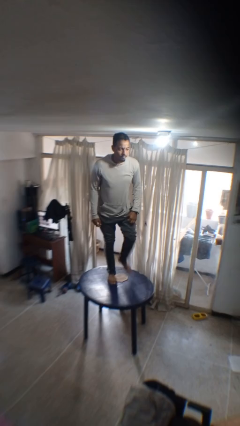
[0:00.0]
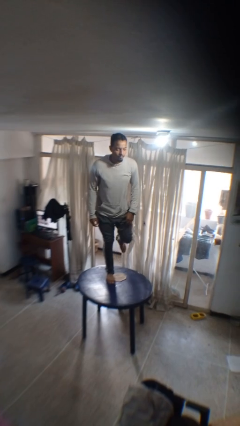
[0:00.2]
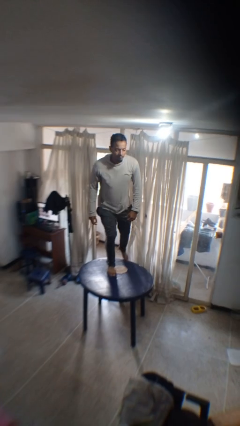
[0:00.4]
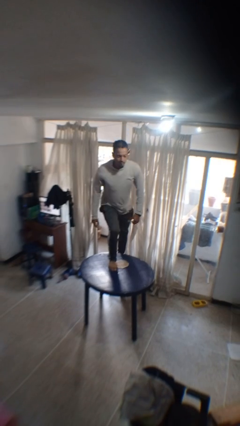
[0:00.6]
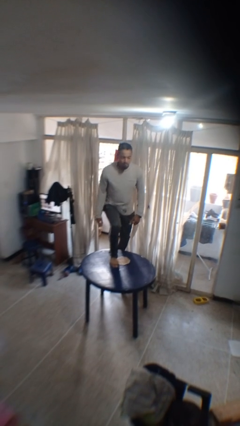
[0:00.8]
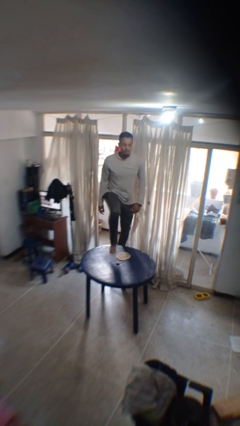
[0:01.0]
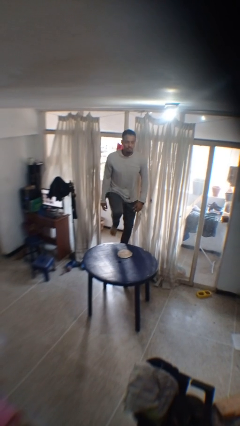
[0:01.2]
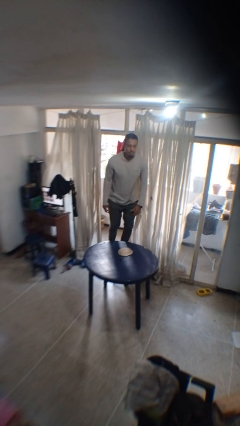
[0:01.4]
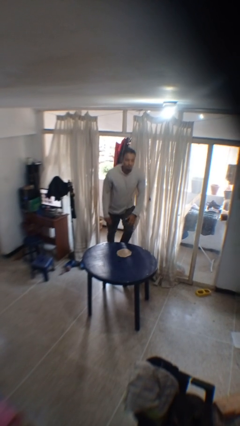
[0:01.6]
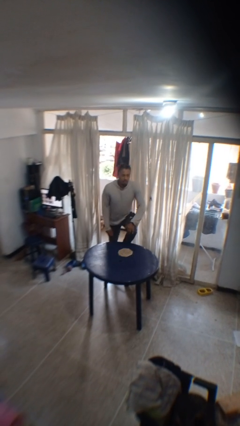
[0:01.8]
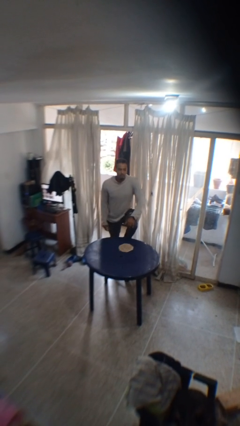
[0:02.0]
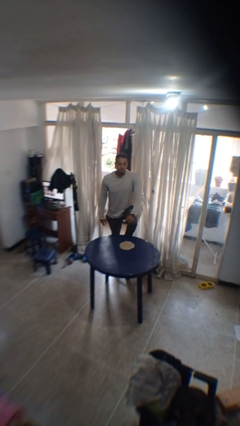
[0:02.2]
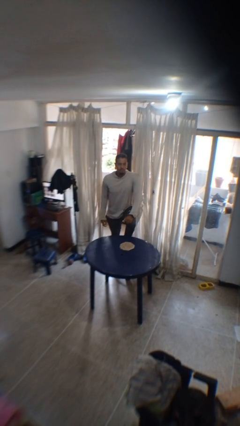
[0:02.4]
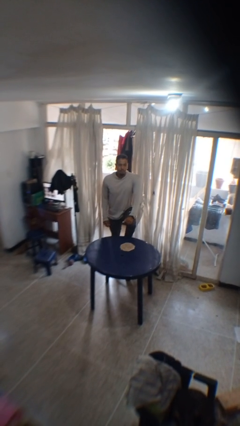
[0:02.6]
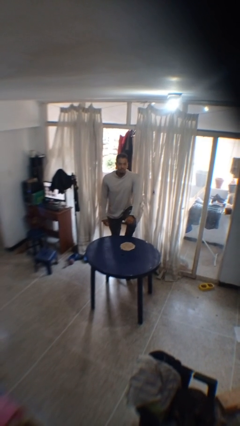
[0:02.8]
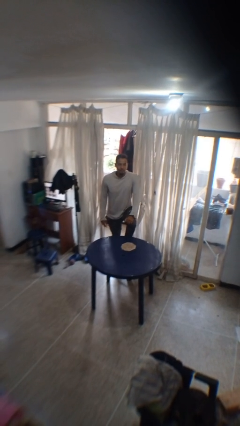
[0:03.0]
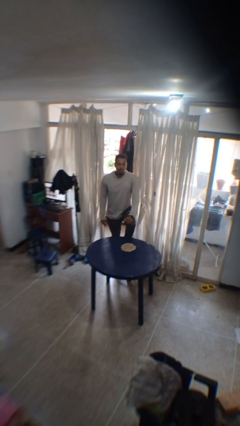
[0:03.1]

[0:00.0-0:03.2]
person climbs off table

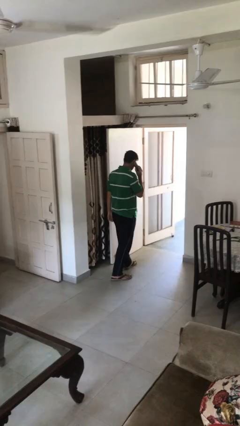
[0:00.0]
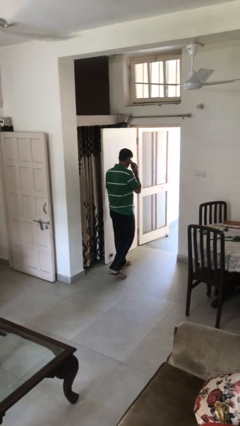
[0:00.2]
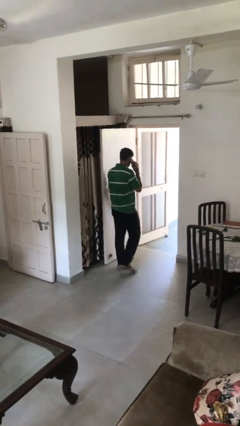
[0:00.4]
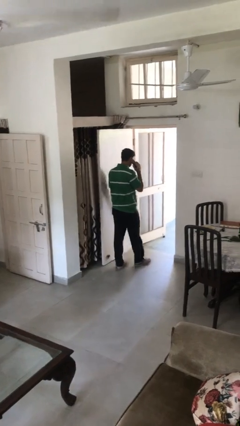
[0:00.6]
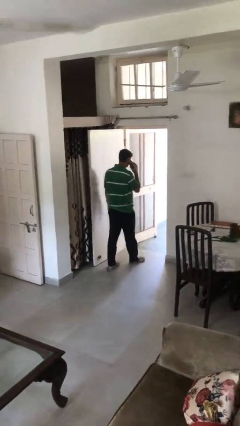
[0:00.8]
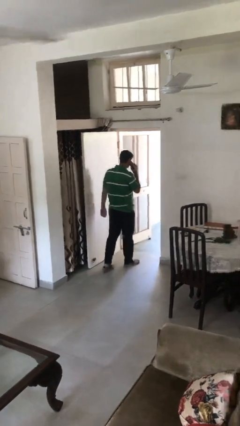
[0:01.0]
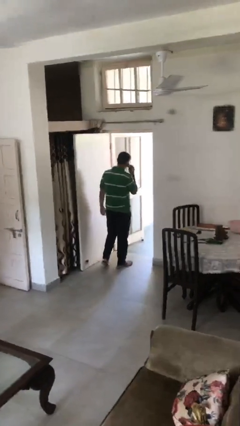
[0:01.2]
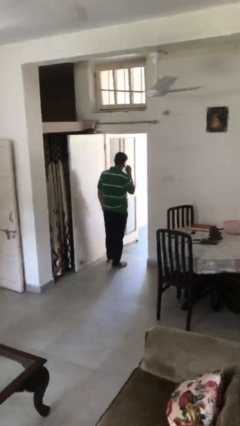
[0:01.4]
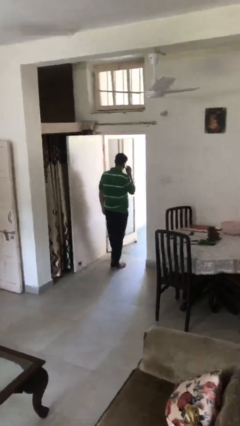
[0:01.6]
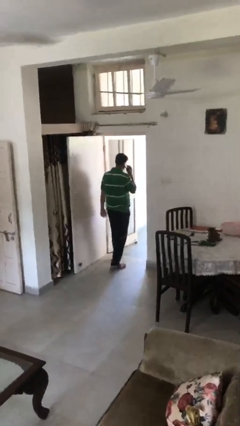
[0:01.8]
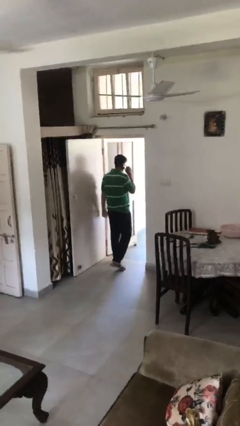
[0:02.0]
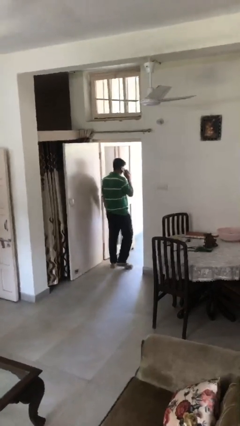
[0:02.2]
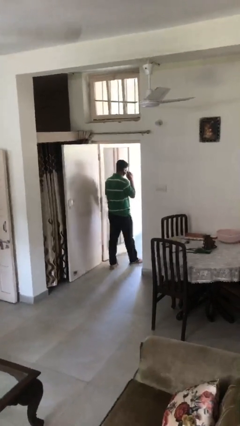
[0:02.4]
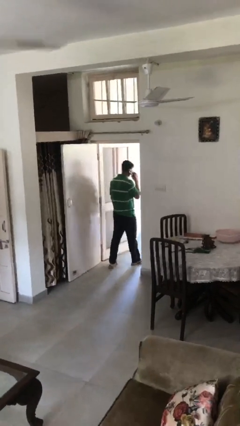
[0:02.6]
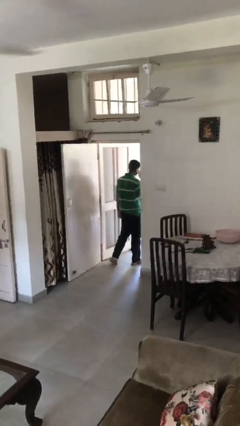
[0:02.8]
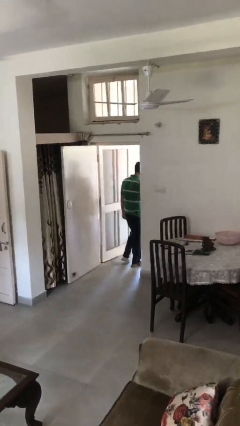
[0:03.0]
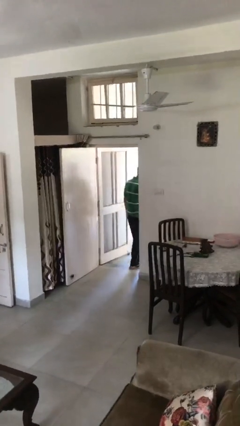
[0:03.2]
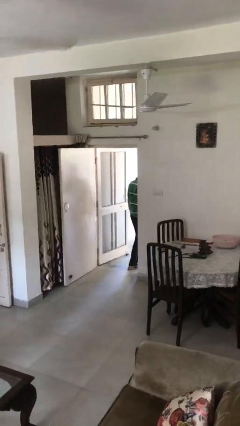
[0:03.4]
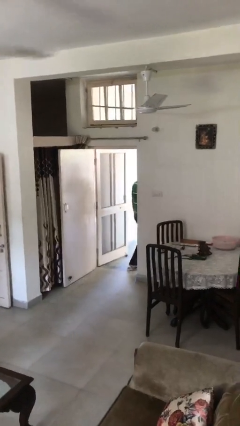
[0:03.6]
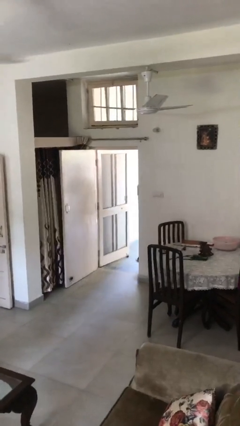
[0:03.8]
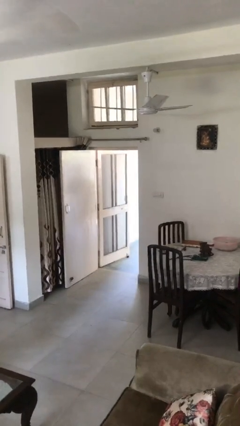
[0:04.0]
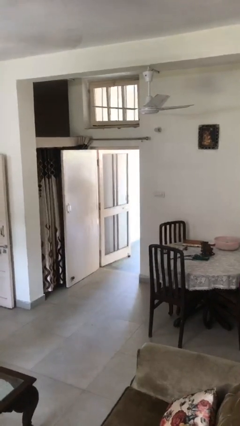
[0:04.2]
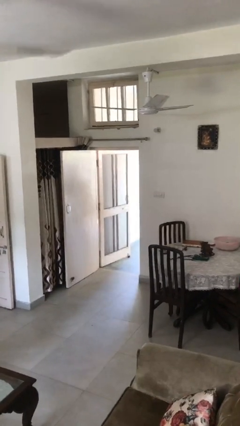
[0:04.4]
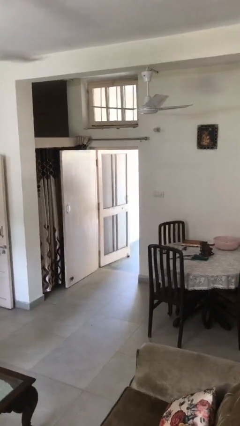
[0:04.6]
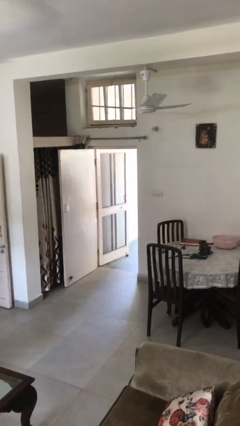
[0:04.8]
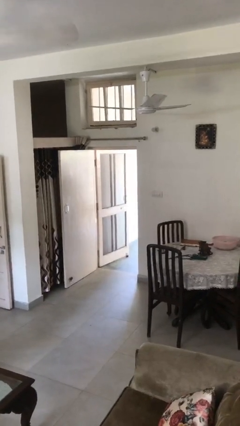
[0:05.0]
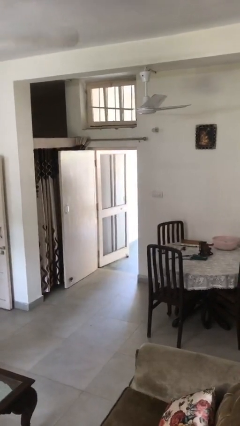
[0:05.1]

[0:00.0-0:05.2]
person exits scene through structure

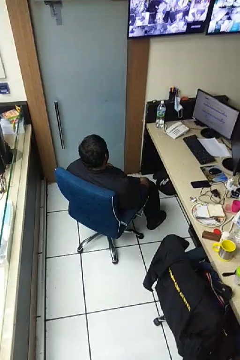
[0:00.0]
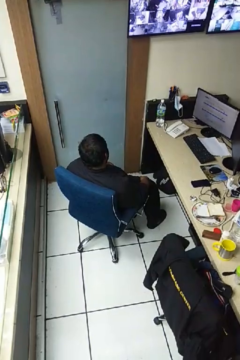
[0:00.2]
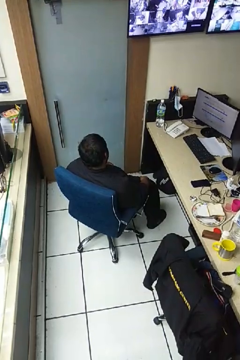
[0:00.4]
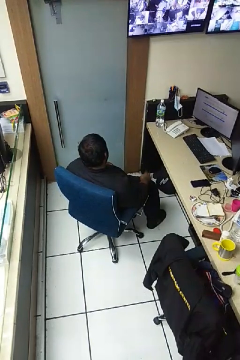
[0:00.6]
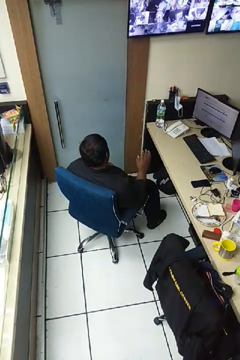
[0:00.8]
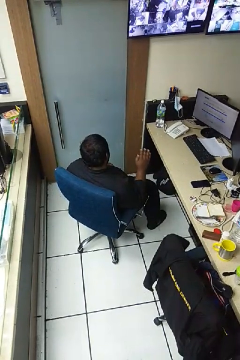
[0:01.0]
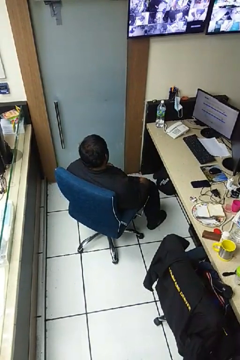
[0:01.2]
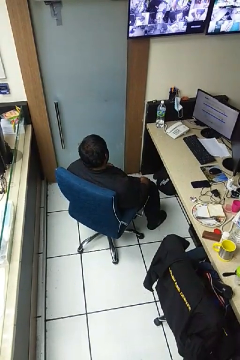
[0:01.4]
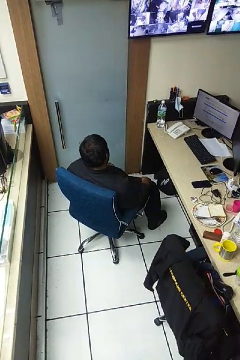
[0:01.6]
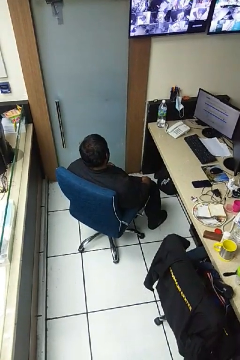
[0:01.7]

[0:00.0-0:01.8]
person slaps hands on thighs

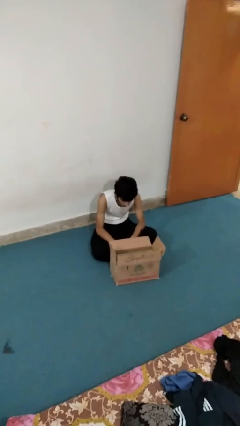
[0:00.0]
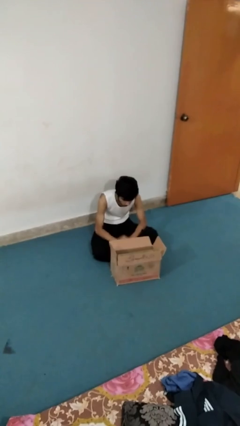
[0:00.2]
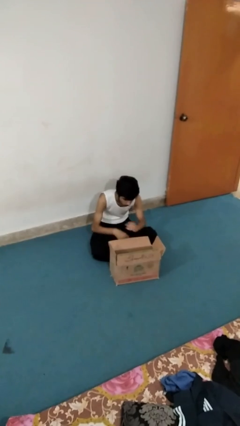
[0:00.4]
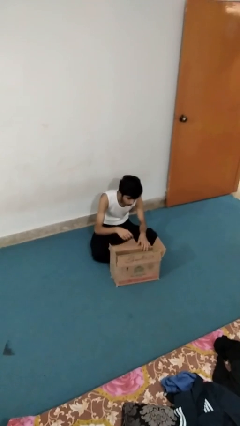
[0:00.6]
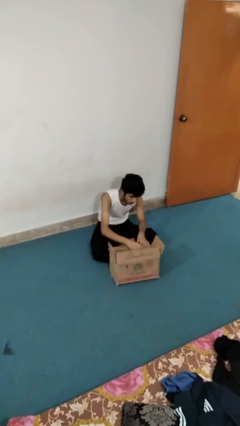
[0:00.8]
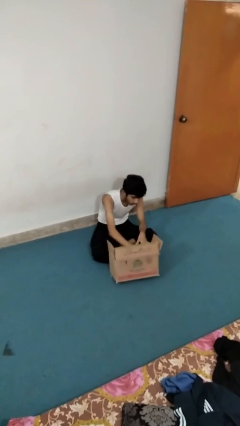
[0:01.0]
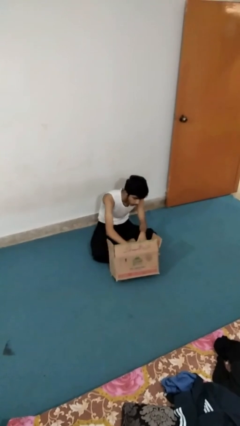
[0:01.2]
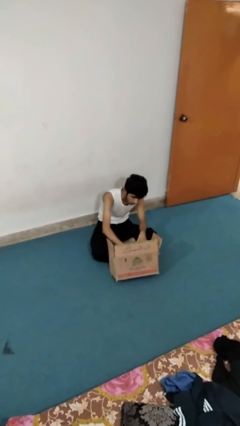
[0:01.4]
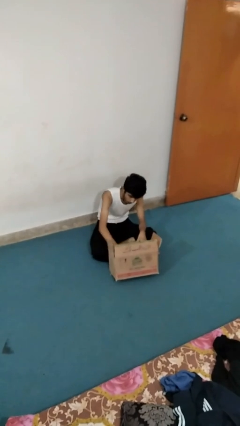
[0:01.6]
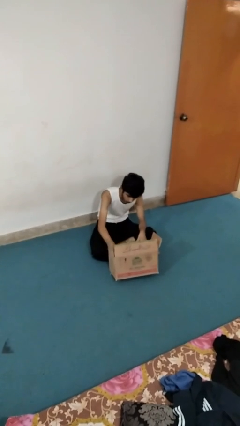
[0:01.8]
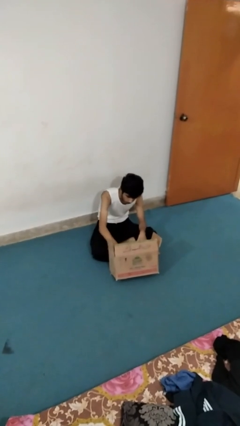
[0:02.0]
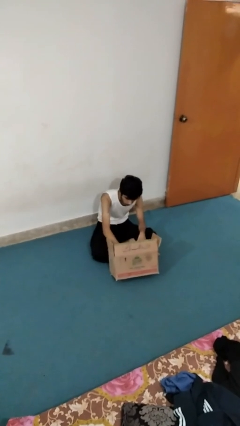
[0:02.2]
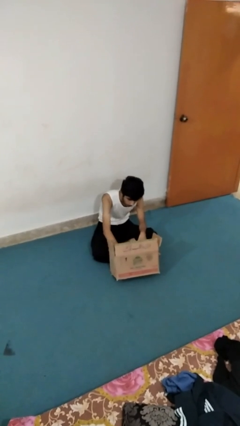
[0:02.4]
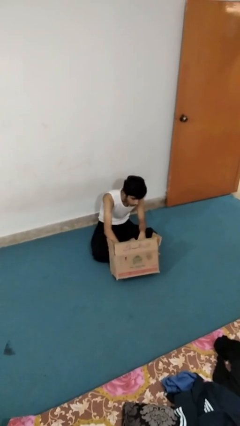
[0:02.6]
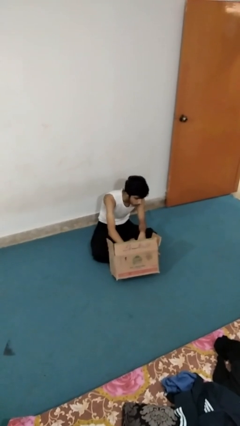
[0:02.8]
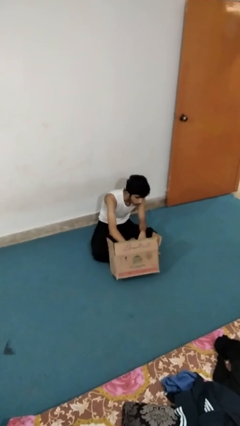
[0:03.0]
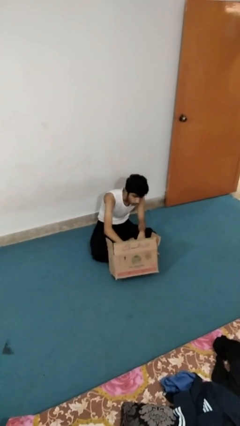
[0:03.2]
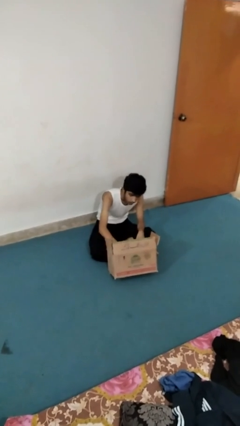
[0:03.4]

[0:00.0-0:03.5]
person searches in box

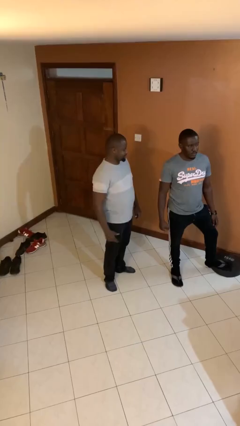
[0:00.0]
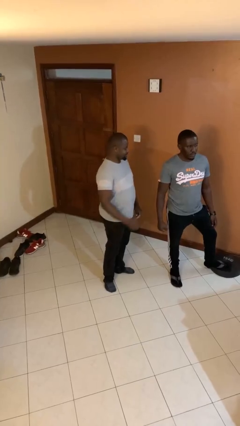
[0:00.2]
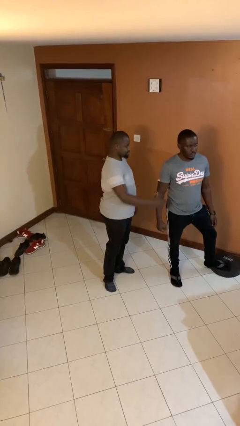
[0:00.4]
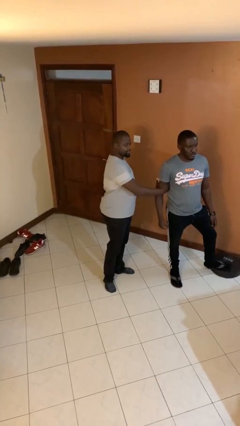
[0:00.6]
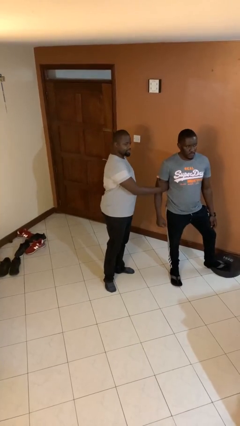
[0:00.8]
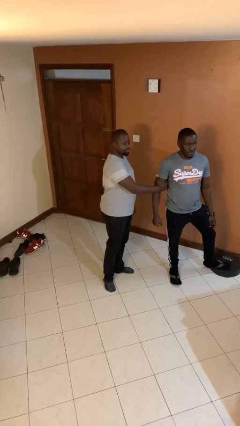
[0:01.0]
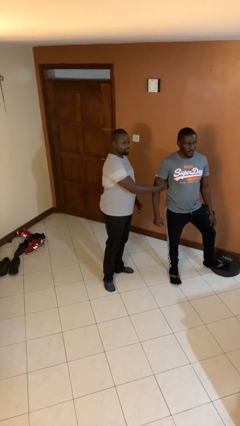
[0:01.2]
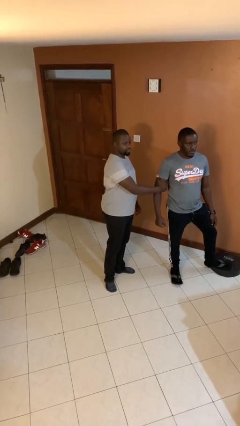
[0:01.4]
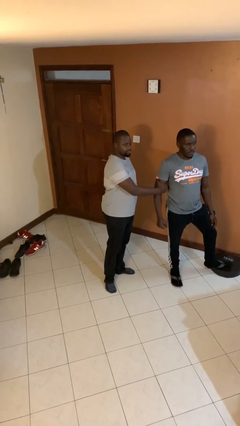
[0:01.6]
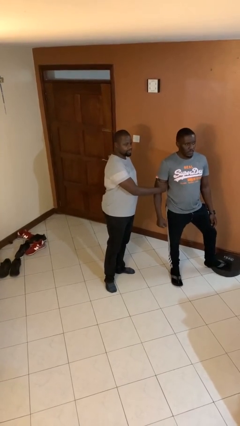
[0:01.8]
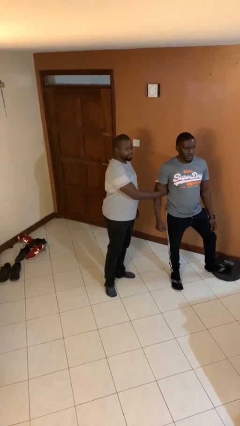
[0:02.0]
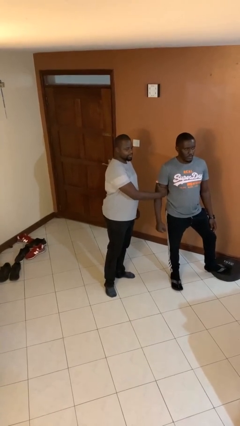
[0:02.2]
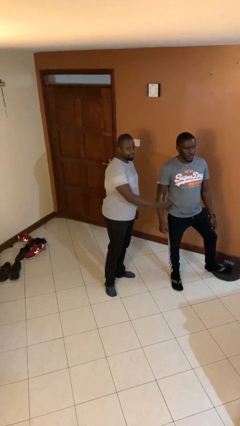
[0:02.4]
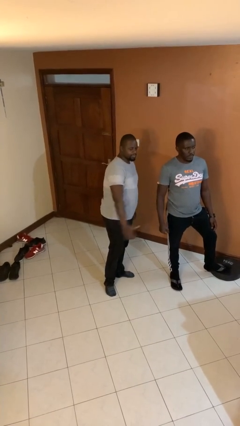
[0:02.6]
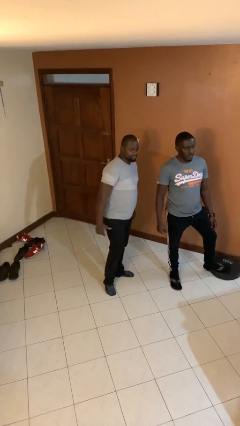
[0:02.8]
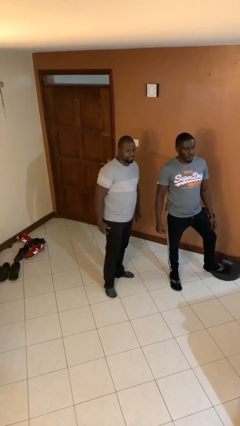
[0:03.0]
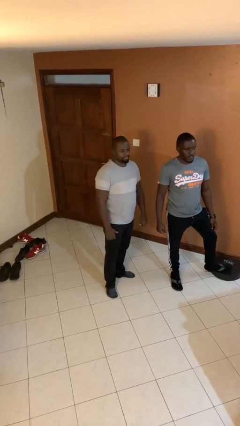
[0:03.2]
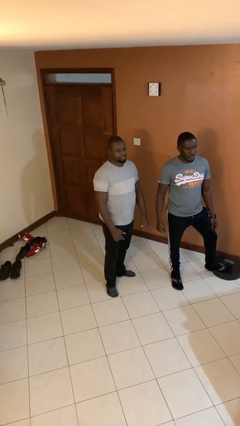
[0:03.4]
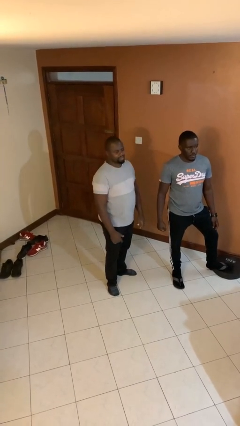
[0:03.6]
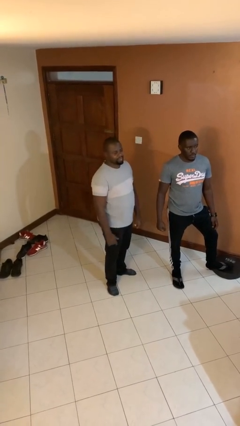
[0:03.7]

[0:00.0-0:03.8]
person grabs person by bicep

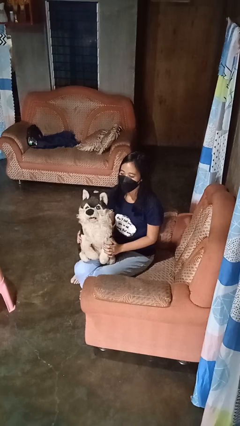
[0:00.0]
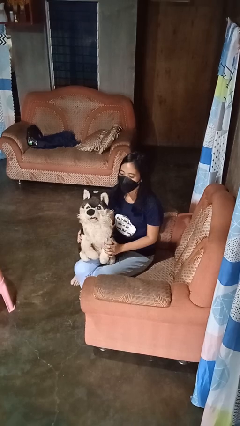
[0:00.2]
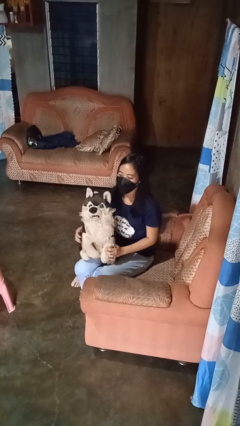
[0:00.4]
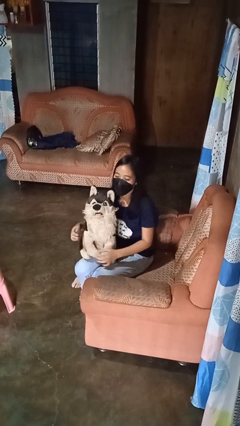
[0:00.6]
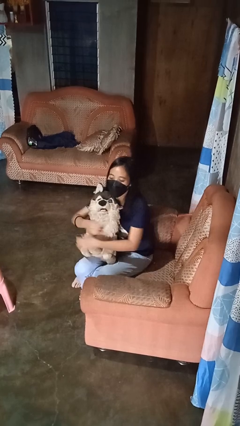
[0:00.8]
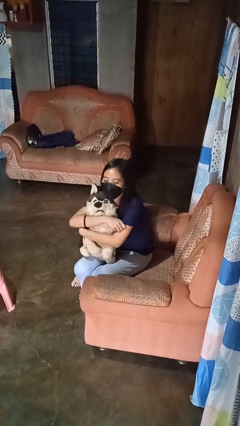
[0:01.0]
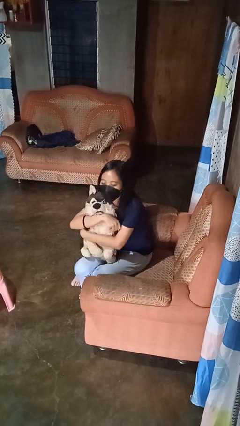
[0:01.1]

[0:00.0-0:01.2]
person hugs stuffed animal
